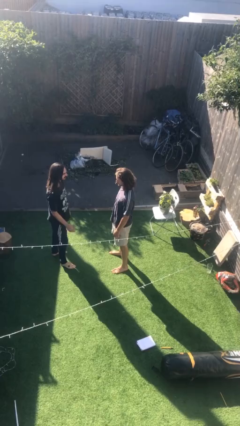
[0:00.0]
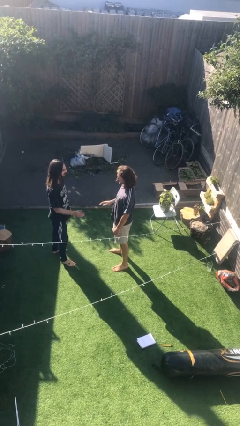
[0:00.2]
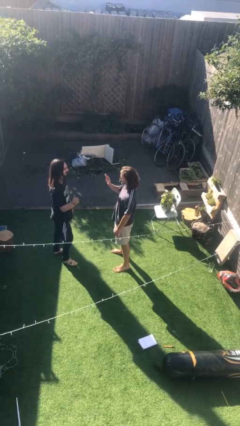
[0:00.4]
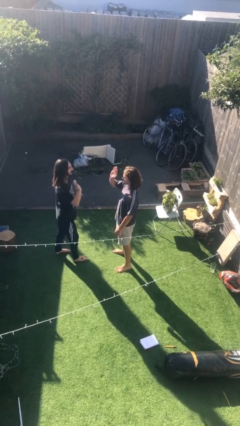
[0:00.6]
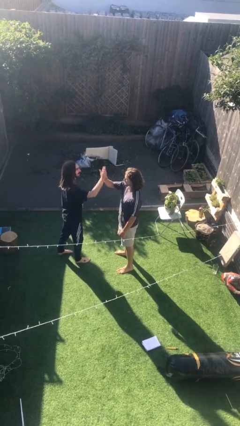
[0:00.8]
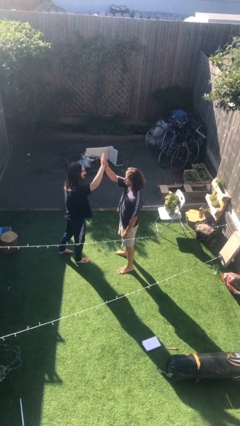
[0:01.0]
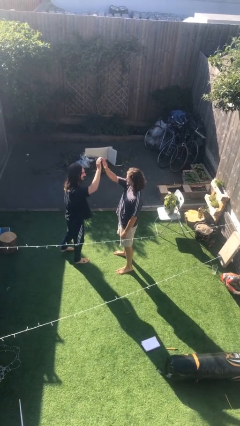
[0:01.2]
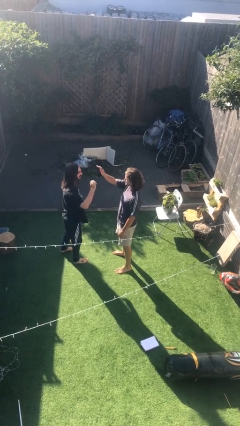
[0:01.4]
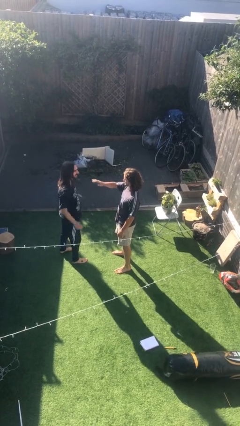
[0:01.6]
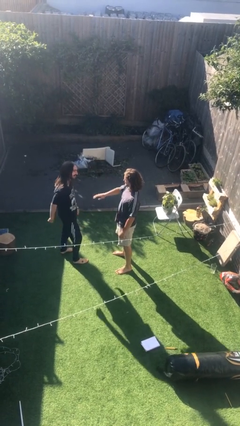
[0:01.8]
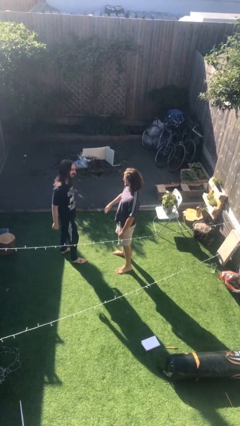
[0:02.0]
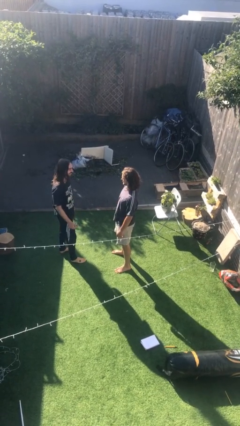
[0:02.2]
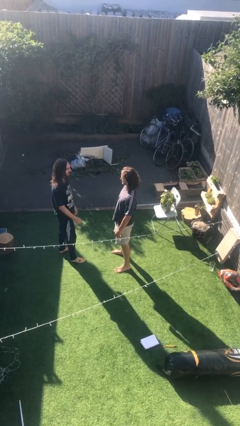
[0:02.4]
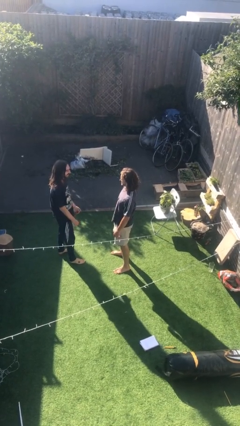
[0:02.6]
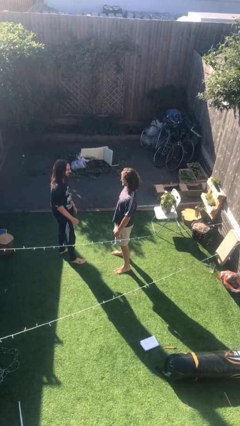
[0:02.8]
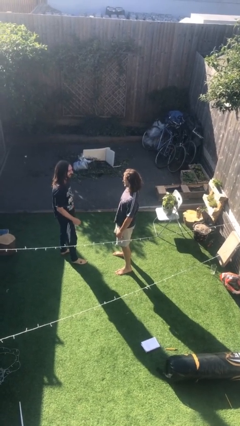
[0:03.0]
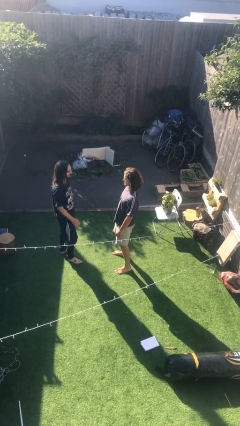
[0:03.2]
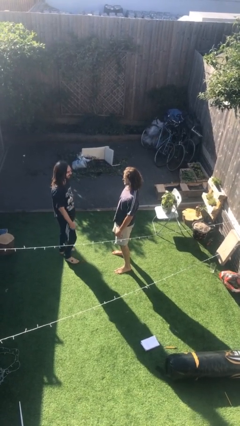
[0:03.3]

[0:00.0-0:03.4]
person highfives hand

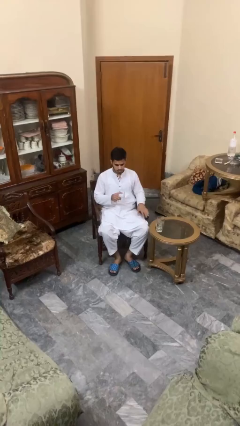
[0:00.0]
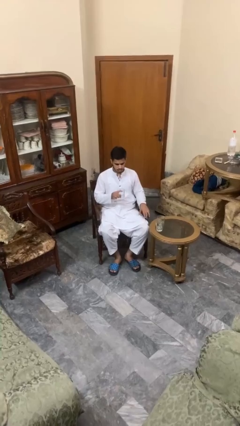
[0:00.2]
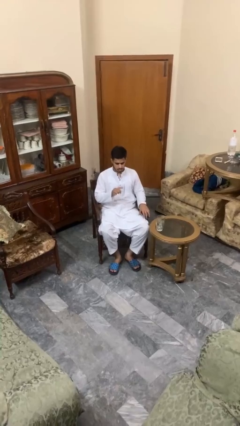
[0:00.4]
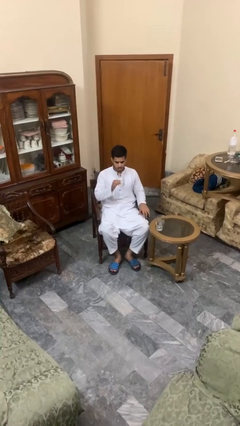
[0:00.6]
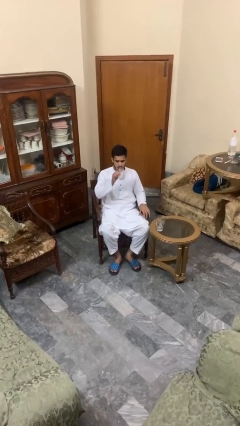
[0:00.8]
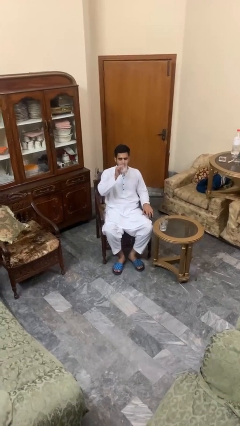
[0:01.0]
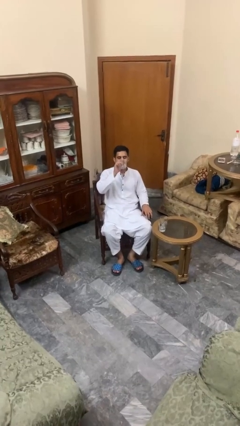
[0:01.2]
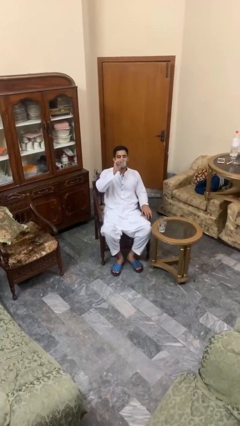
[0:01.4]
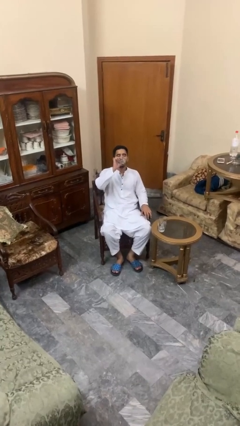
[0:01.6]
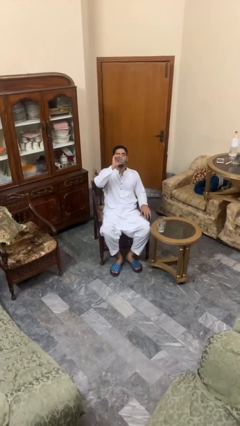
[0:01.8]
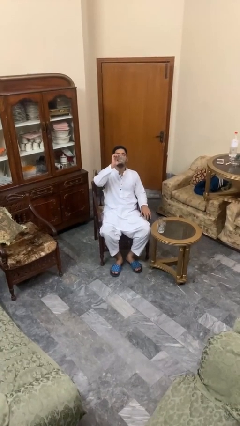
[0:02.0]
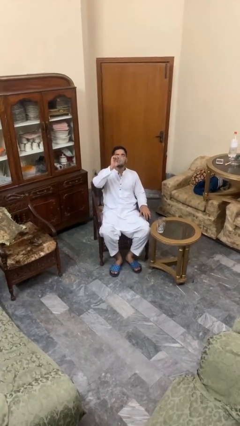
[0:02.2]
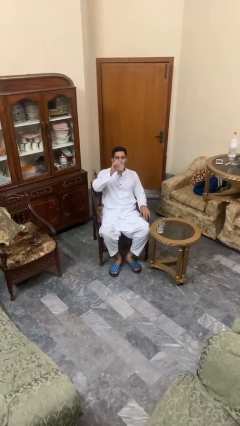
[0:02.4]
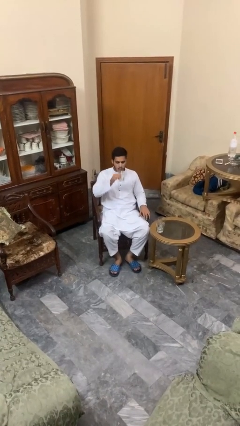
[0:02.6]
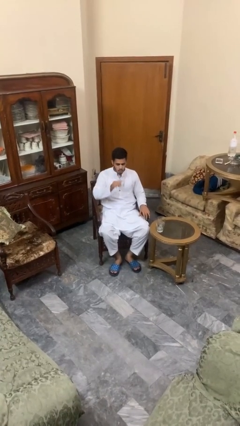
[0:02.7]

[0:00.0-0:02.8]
person drinks from shotglass

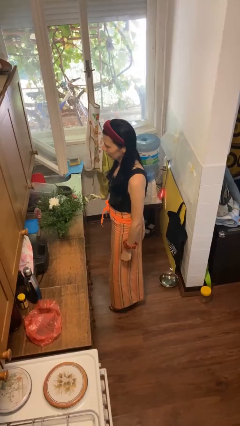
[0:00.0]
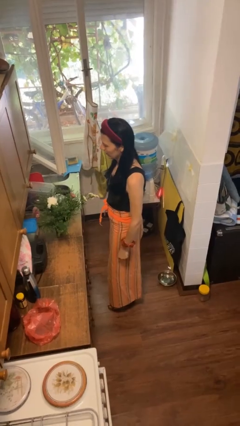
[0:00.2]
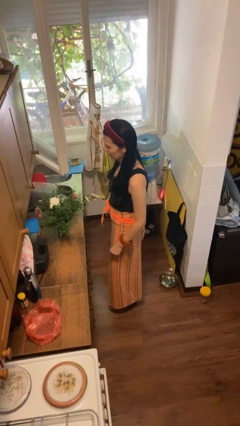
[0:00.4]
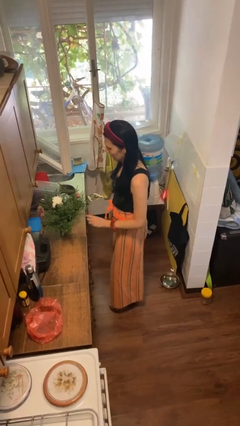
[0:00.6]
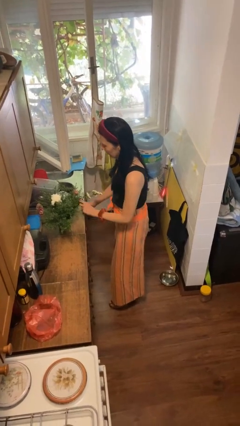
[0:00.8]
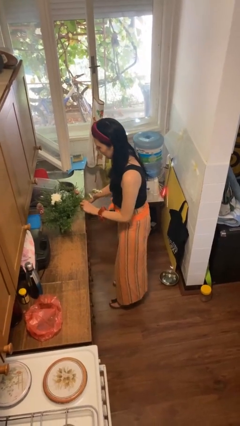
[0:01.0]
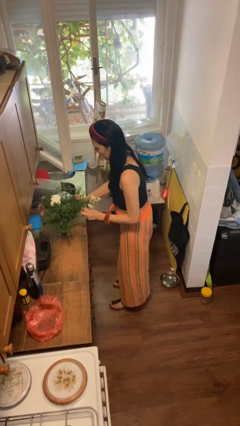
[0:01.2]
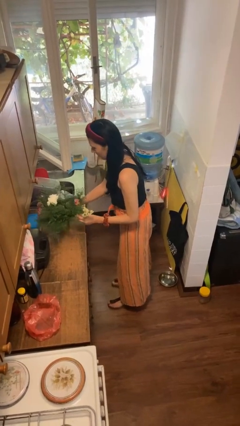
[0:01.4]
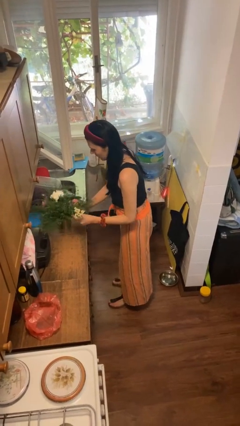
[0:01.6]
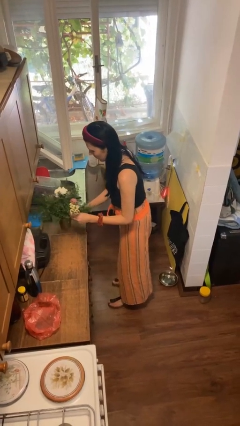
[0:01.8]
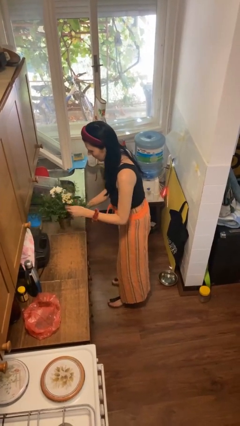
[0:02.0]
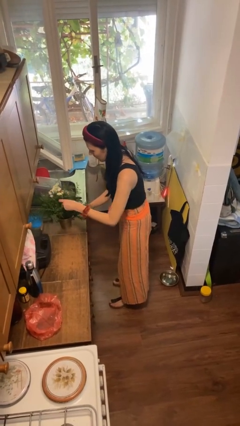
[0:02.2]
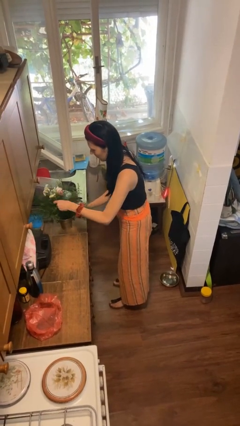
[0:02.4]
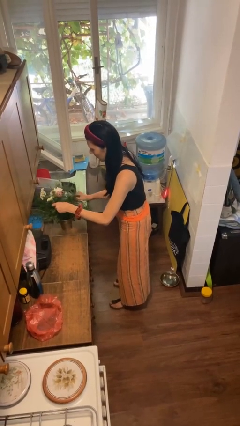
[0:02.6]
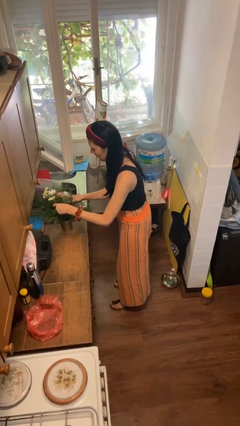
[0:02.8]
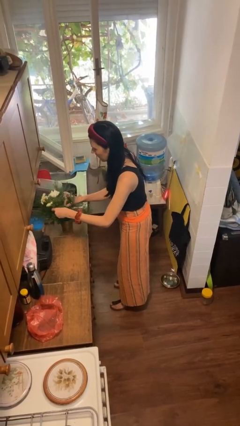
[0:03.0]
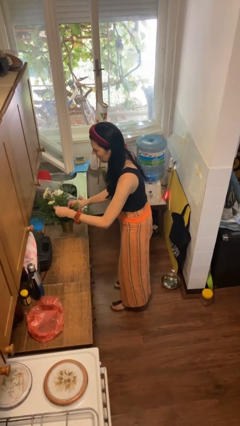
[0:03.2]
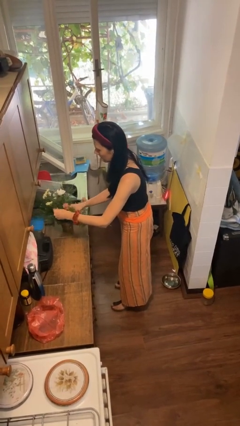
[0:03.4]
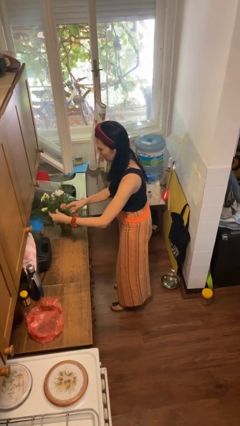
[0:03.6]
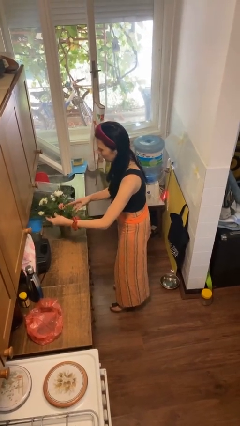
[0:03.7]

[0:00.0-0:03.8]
person arranges flowers in vase

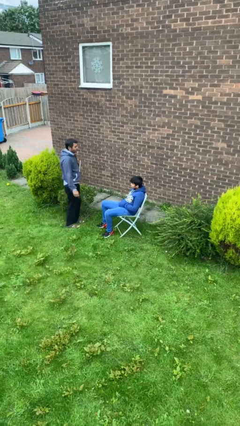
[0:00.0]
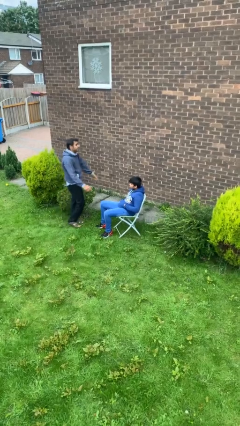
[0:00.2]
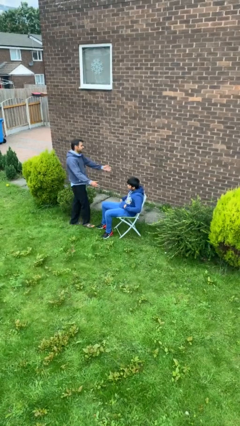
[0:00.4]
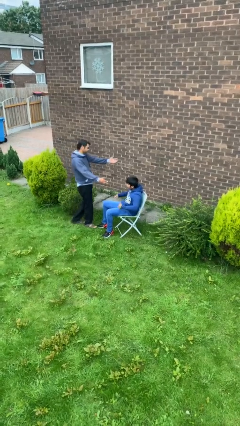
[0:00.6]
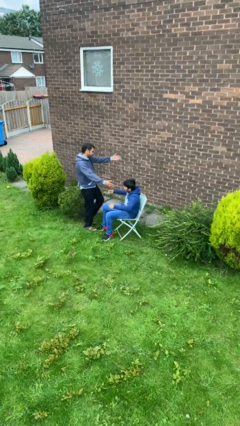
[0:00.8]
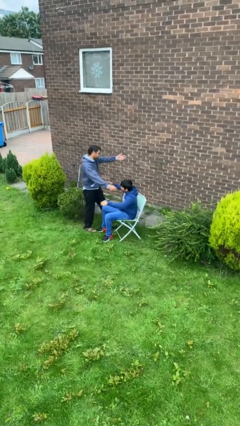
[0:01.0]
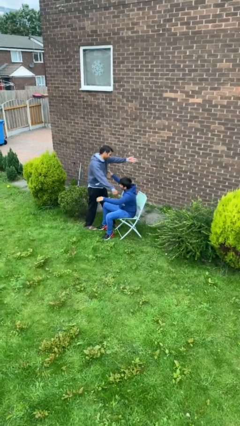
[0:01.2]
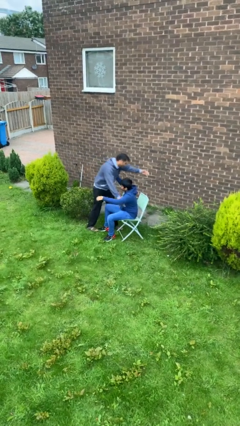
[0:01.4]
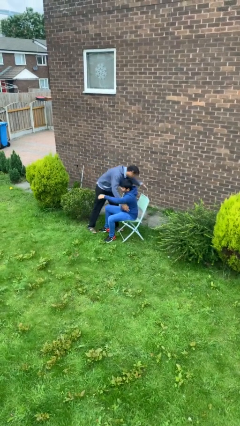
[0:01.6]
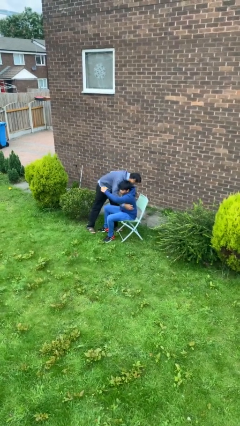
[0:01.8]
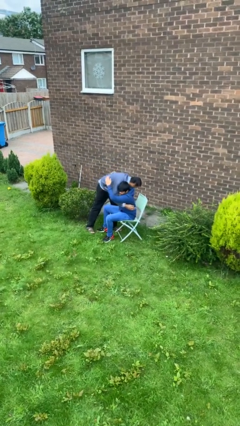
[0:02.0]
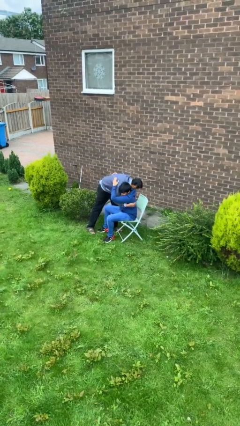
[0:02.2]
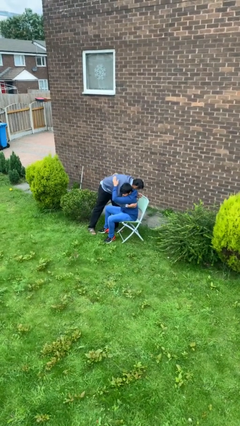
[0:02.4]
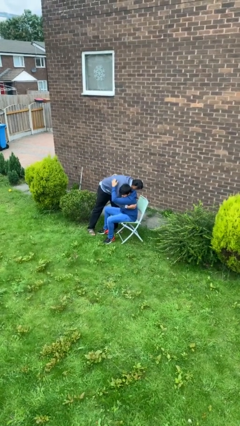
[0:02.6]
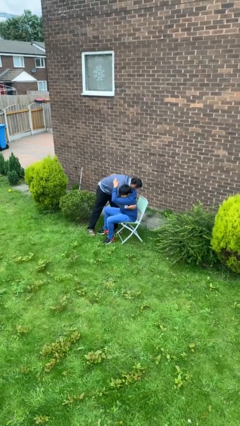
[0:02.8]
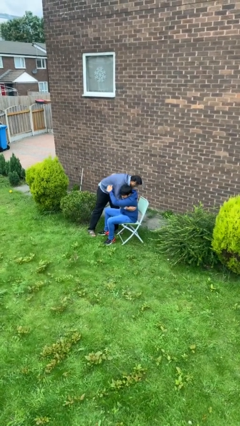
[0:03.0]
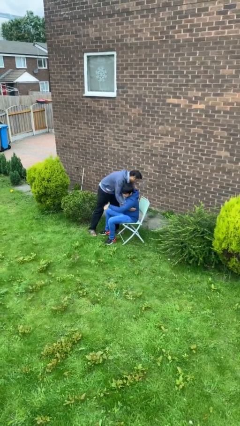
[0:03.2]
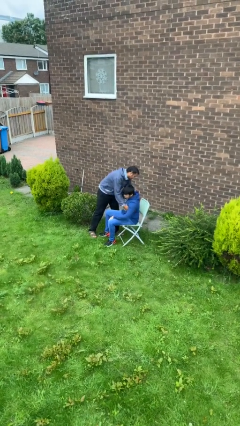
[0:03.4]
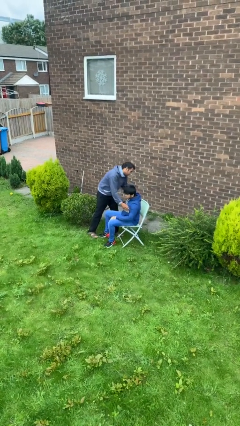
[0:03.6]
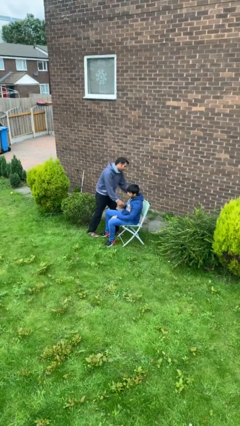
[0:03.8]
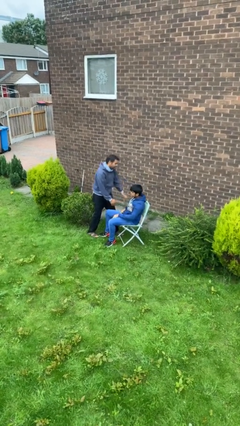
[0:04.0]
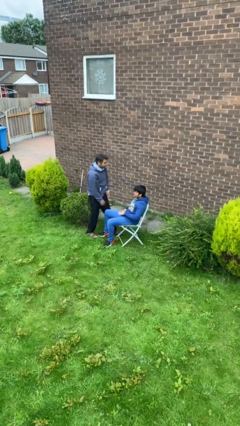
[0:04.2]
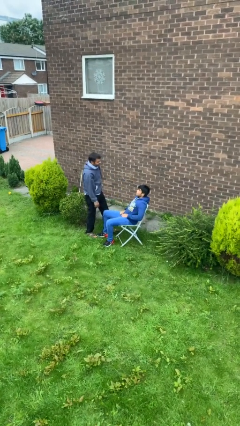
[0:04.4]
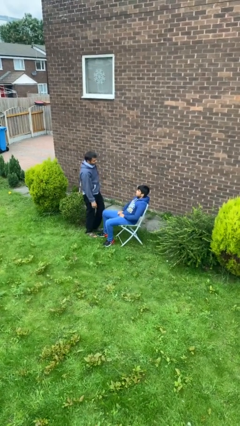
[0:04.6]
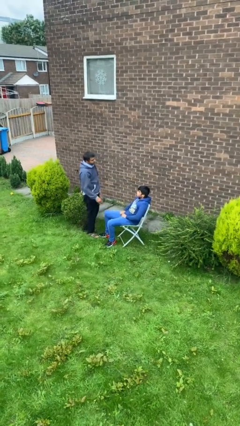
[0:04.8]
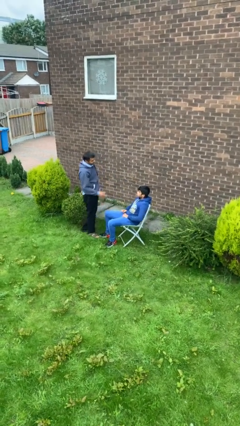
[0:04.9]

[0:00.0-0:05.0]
person embraces person

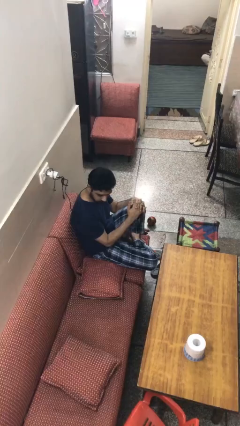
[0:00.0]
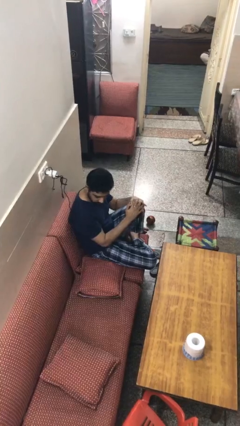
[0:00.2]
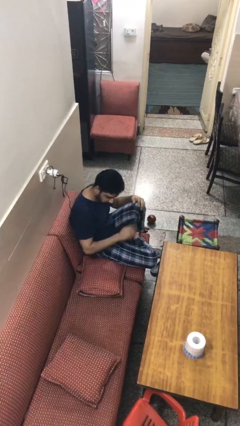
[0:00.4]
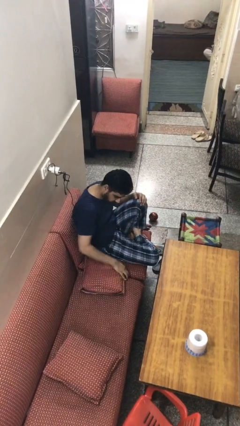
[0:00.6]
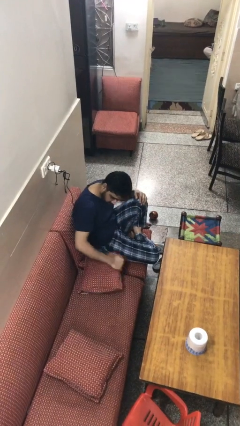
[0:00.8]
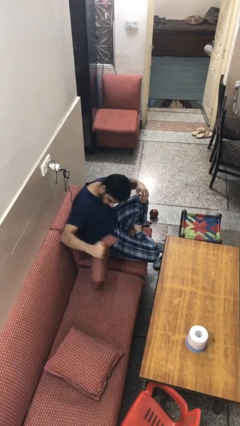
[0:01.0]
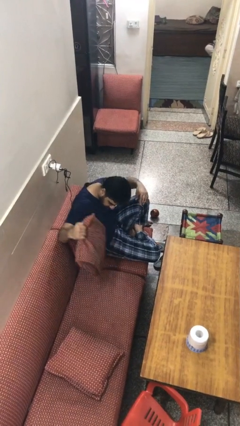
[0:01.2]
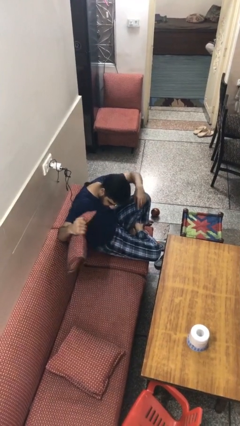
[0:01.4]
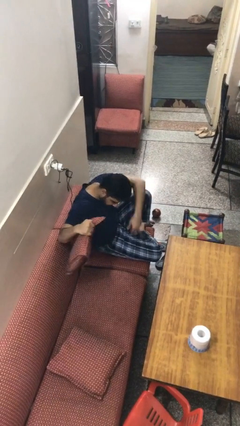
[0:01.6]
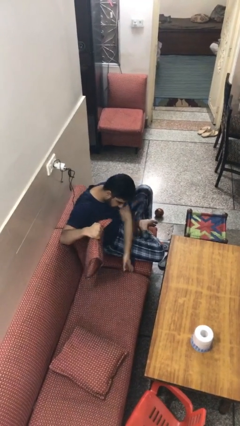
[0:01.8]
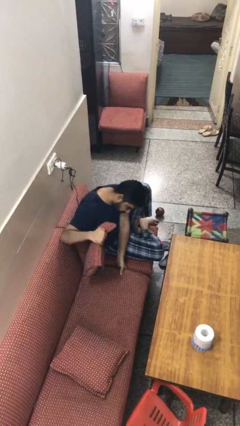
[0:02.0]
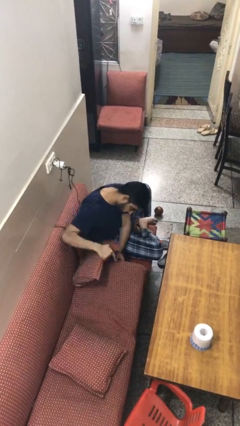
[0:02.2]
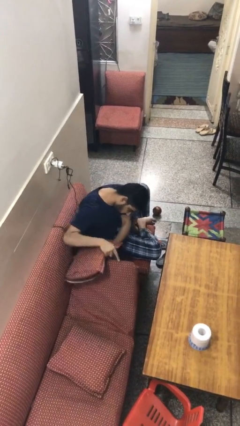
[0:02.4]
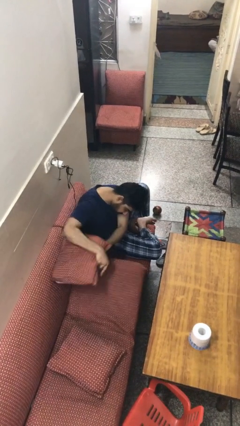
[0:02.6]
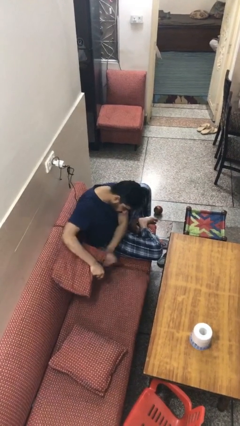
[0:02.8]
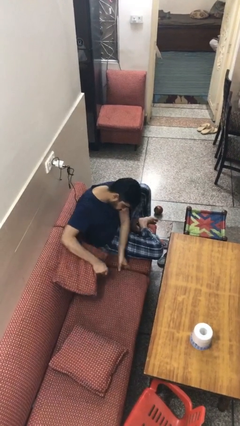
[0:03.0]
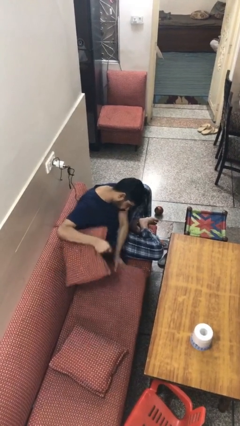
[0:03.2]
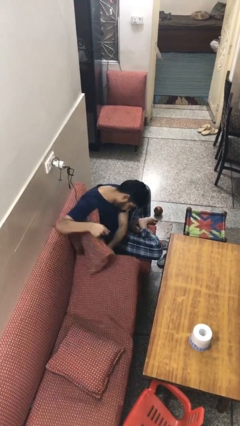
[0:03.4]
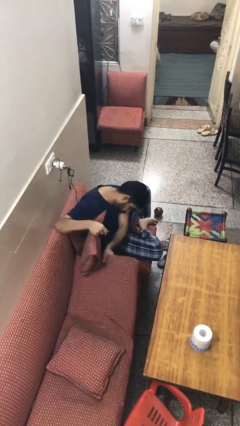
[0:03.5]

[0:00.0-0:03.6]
person searches under couch
